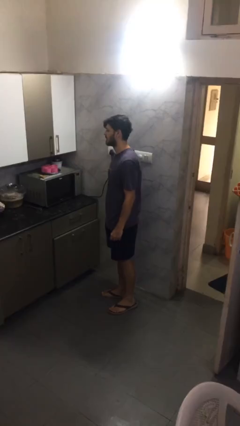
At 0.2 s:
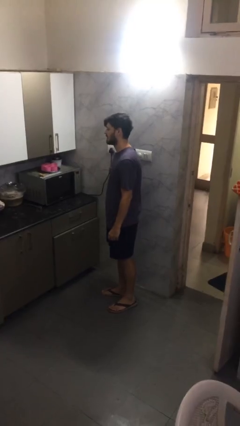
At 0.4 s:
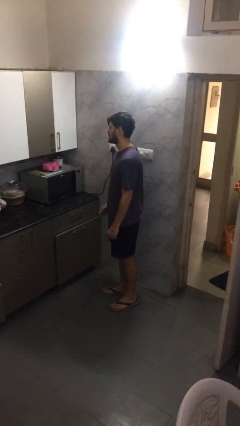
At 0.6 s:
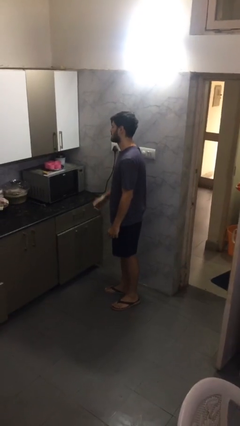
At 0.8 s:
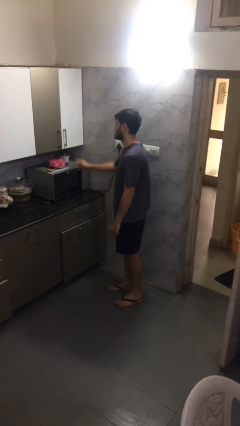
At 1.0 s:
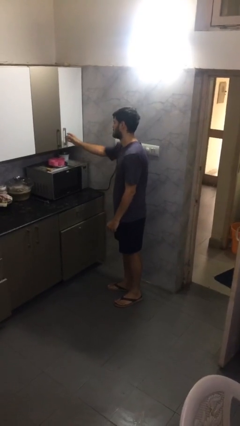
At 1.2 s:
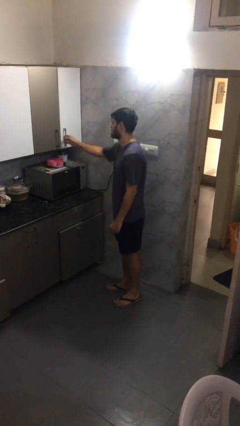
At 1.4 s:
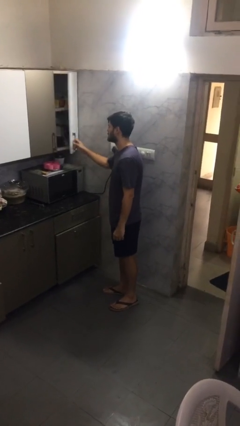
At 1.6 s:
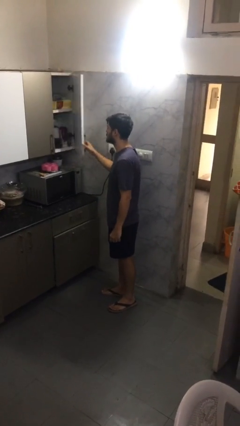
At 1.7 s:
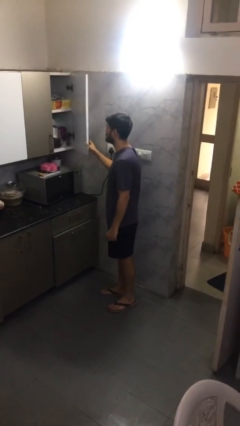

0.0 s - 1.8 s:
person opens cabinet

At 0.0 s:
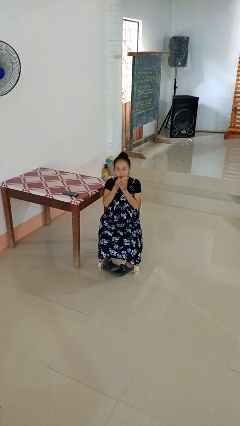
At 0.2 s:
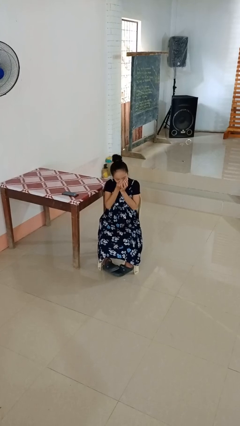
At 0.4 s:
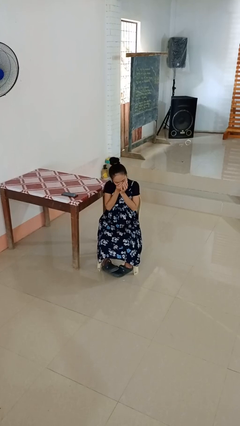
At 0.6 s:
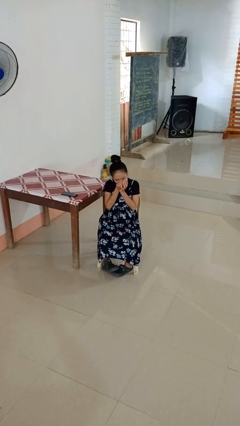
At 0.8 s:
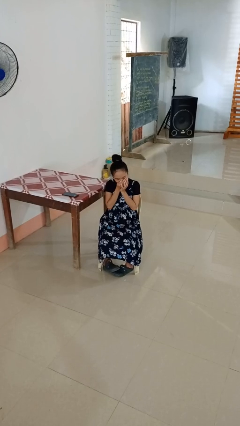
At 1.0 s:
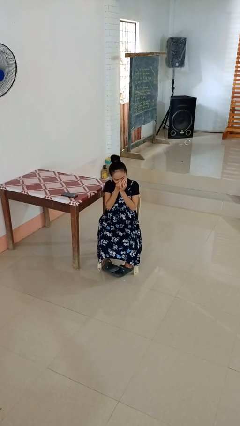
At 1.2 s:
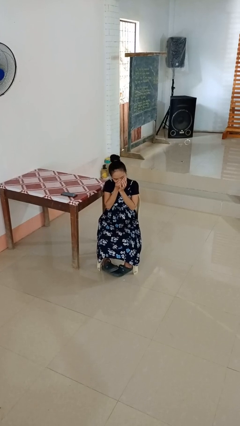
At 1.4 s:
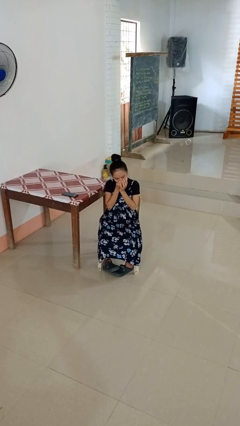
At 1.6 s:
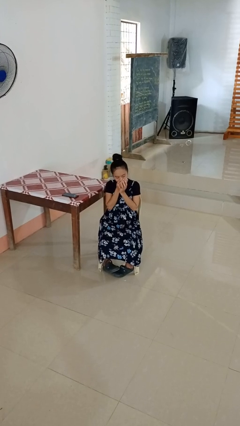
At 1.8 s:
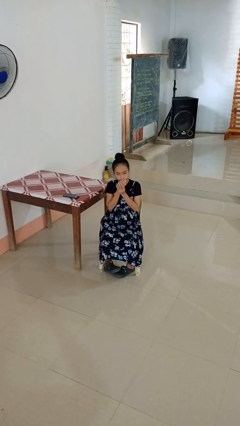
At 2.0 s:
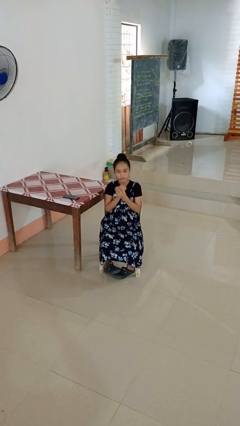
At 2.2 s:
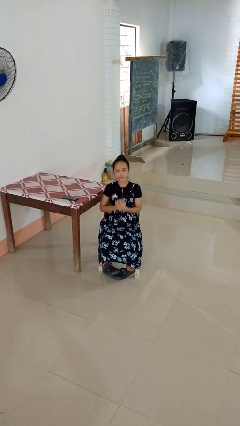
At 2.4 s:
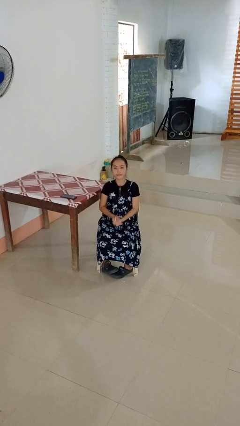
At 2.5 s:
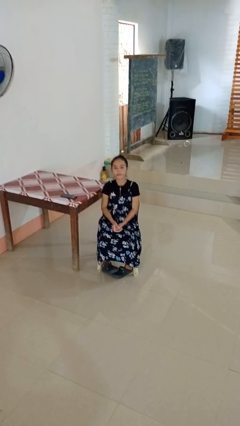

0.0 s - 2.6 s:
person sneezes into hand

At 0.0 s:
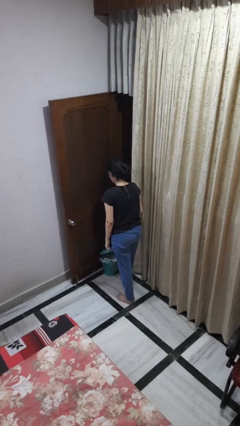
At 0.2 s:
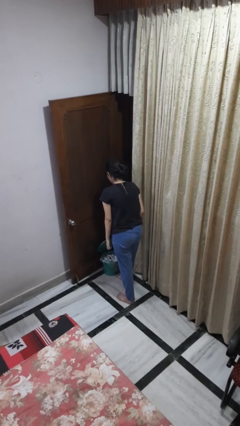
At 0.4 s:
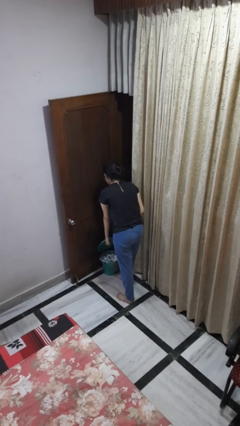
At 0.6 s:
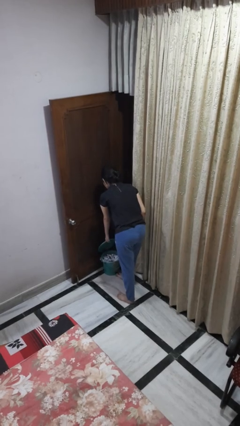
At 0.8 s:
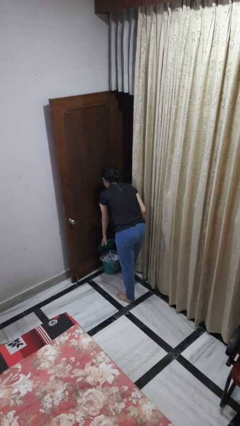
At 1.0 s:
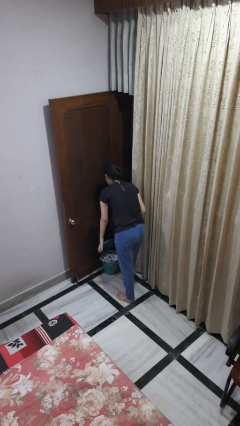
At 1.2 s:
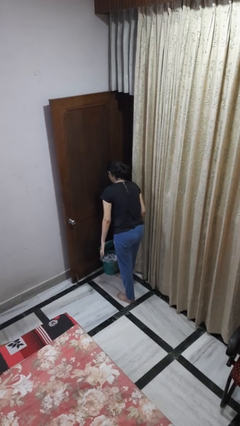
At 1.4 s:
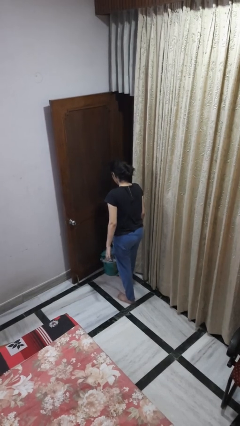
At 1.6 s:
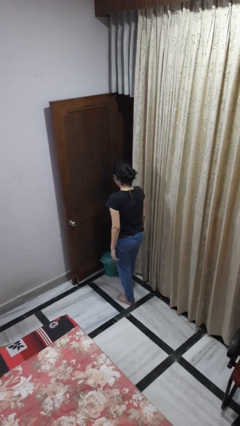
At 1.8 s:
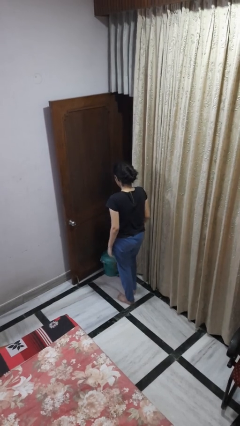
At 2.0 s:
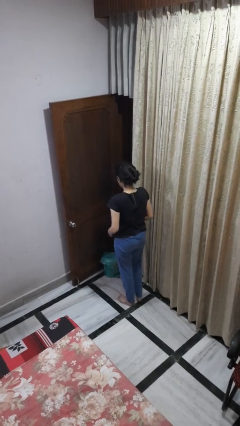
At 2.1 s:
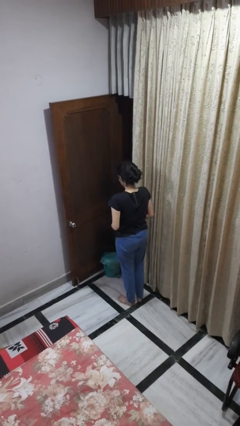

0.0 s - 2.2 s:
person discards trash

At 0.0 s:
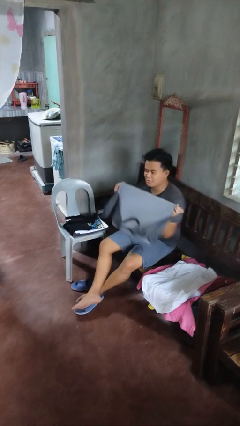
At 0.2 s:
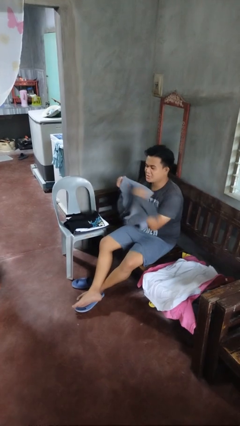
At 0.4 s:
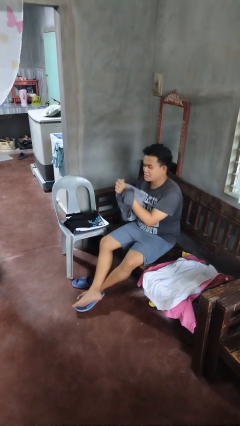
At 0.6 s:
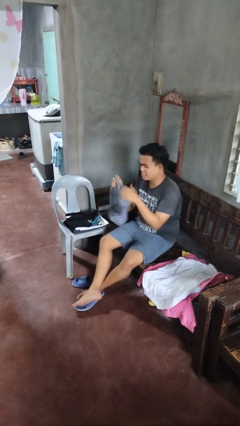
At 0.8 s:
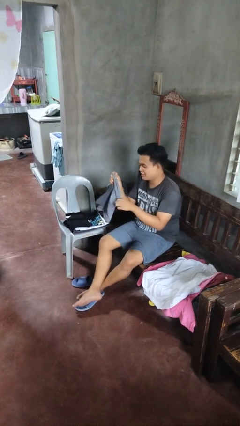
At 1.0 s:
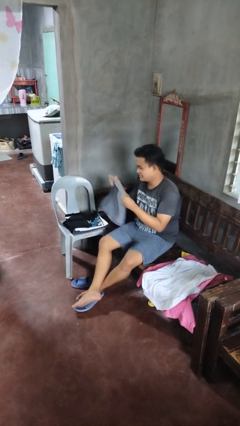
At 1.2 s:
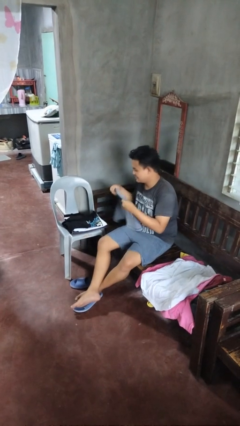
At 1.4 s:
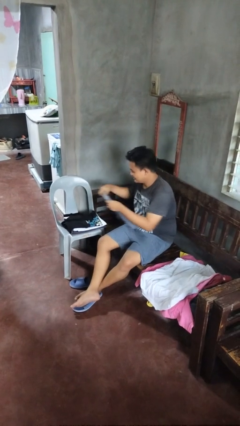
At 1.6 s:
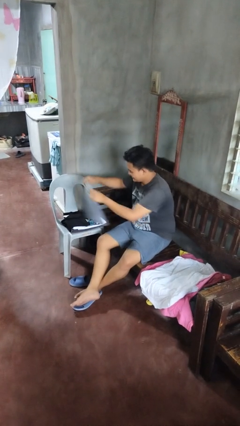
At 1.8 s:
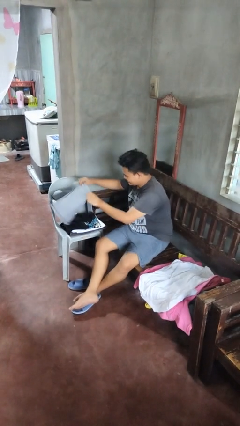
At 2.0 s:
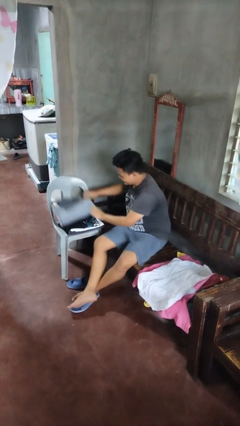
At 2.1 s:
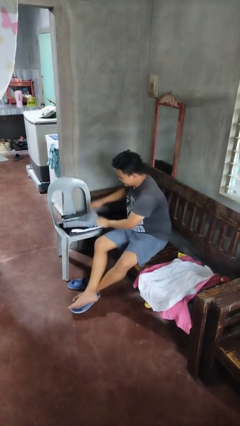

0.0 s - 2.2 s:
person folds shirt

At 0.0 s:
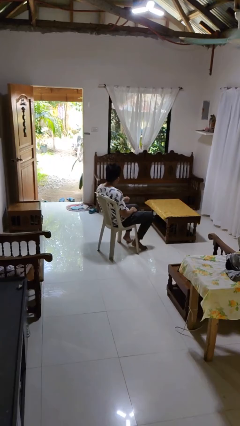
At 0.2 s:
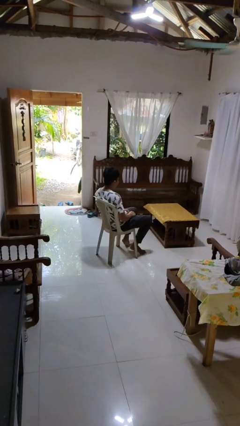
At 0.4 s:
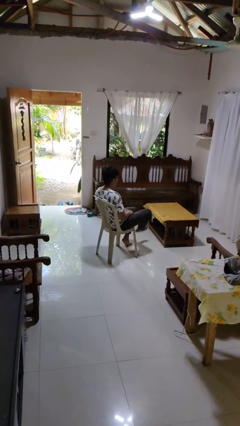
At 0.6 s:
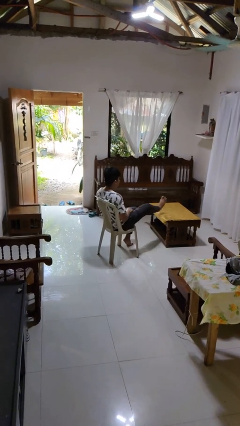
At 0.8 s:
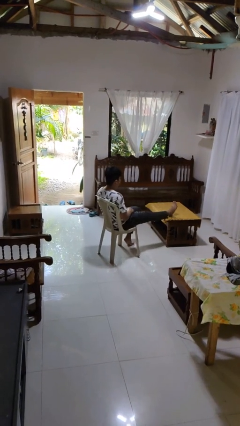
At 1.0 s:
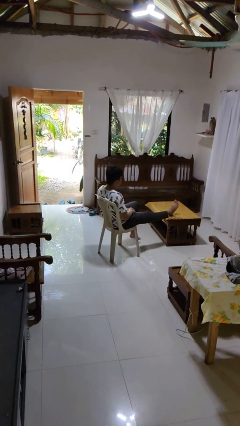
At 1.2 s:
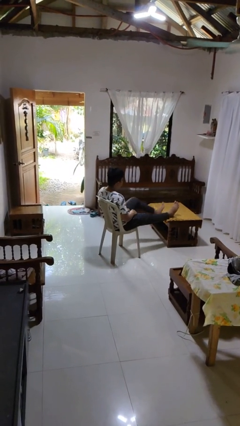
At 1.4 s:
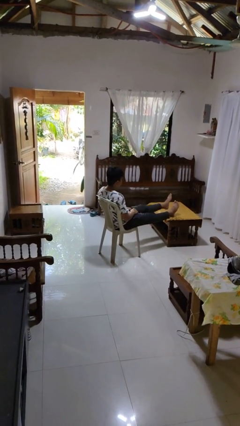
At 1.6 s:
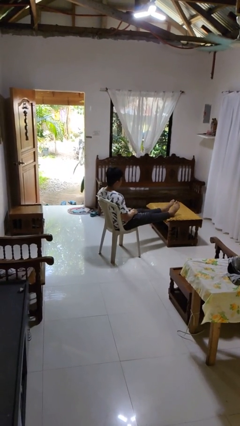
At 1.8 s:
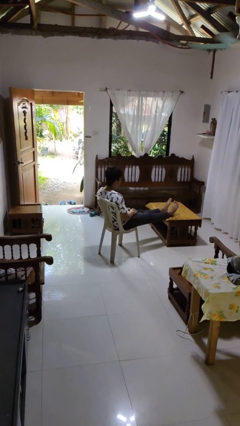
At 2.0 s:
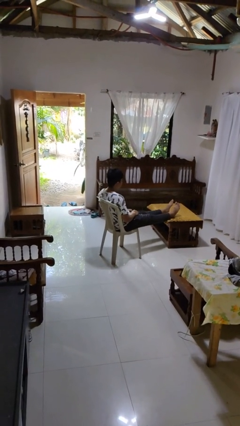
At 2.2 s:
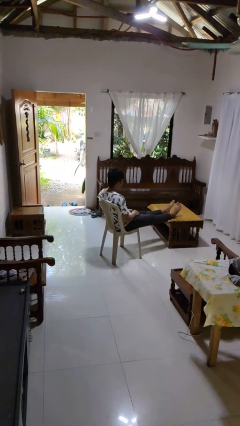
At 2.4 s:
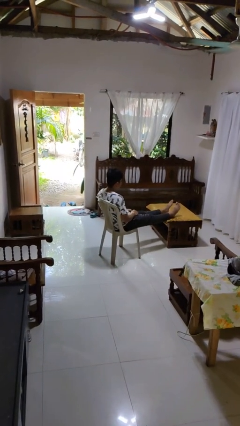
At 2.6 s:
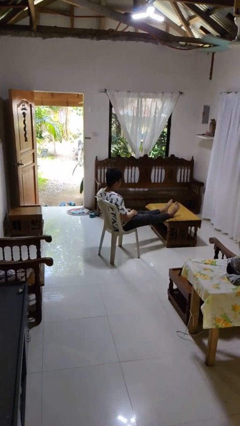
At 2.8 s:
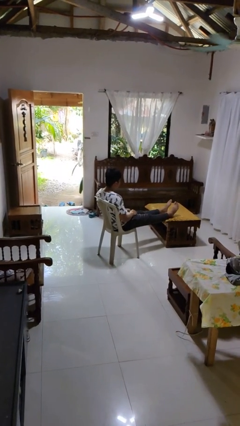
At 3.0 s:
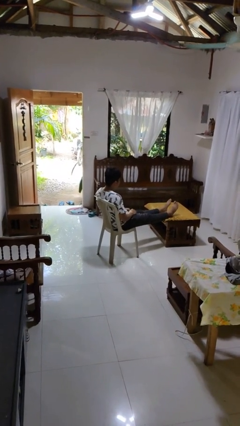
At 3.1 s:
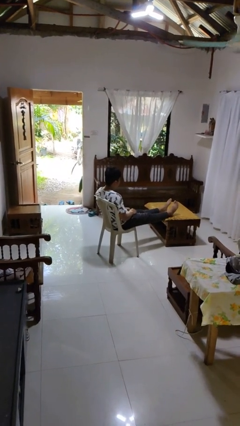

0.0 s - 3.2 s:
person puts feet up

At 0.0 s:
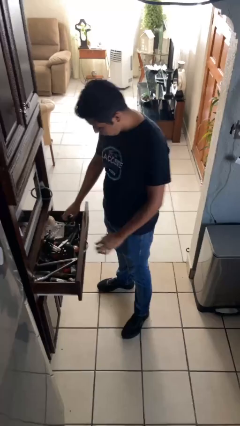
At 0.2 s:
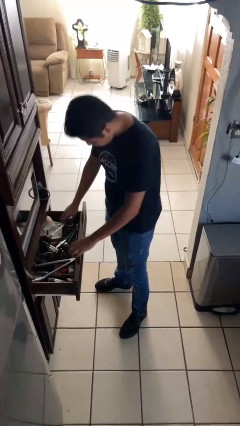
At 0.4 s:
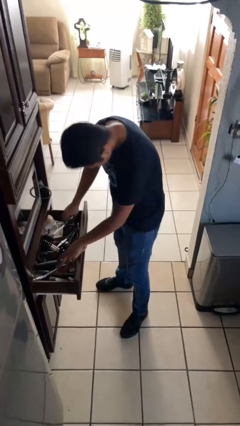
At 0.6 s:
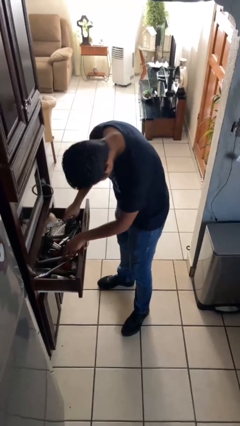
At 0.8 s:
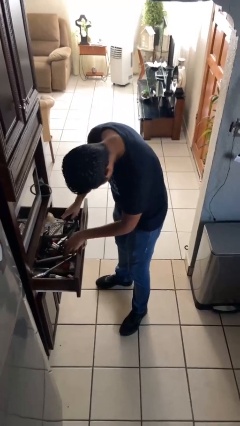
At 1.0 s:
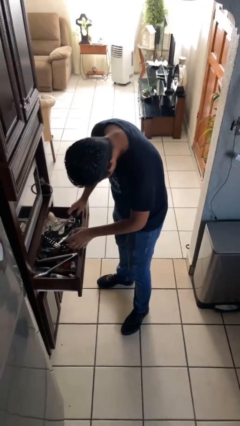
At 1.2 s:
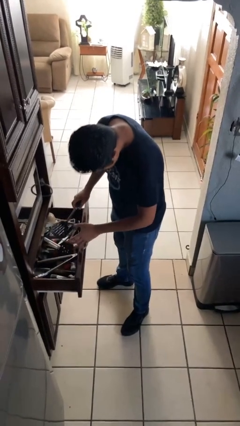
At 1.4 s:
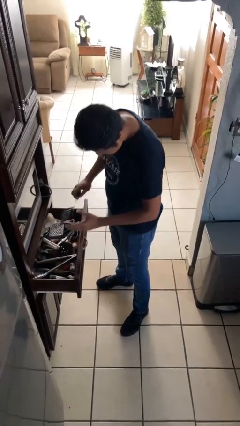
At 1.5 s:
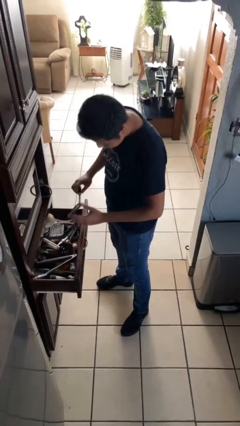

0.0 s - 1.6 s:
person takes object from kitchen drawer

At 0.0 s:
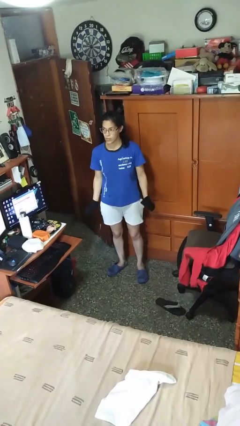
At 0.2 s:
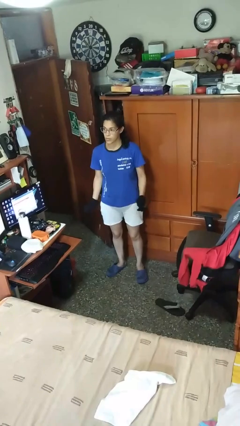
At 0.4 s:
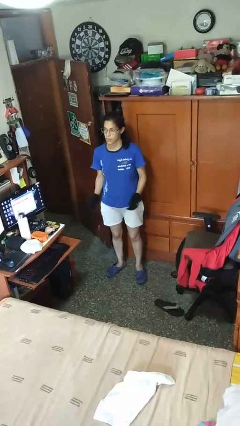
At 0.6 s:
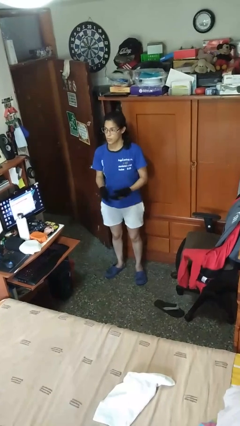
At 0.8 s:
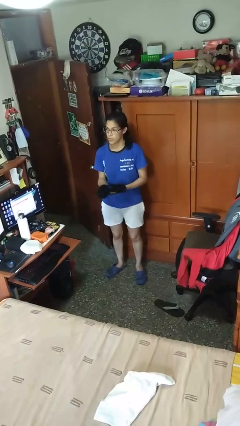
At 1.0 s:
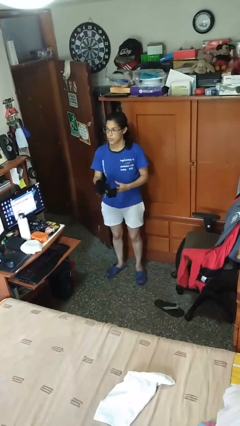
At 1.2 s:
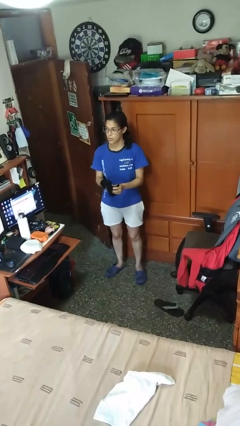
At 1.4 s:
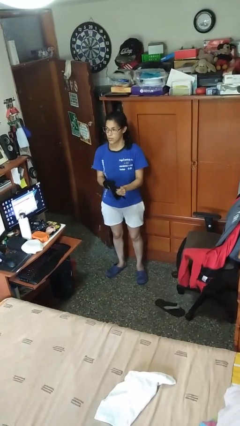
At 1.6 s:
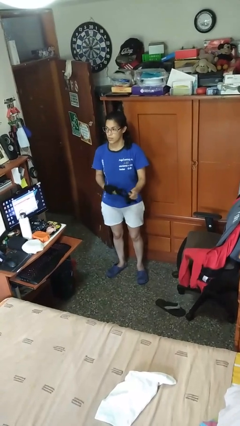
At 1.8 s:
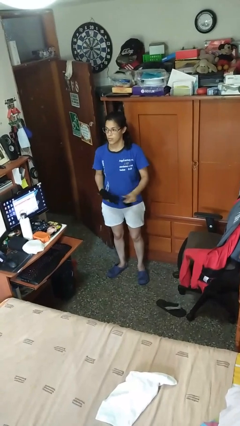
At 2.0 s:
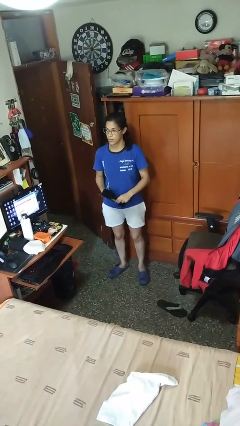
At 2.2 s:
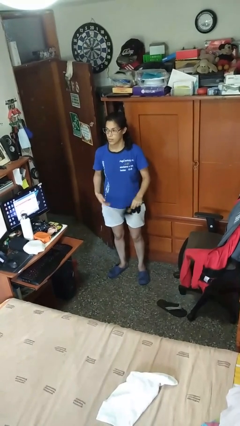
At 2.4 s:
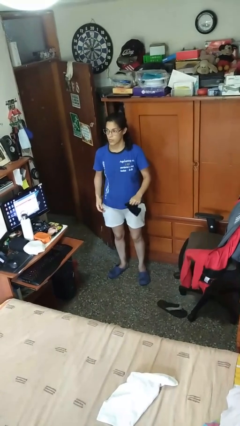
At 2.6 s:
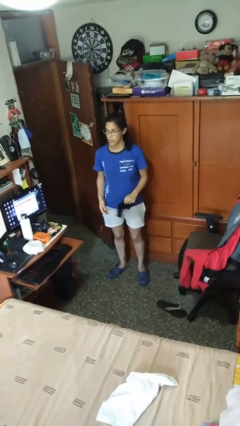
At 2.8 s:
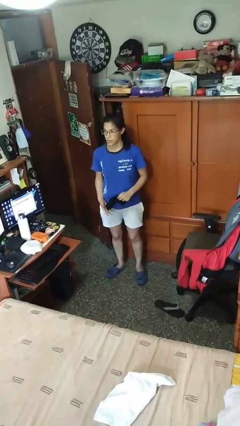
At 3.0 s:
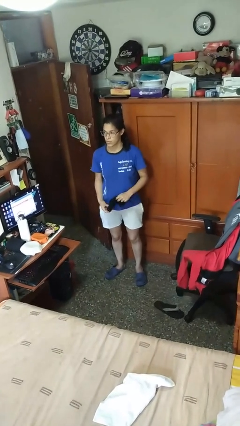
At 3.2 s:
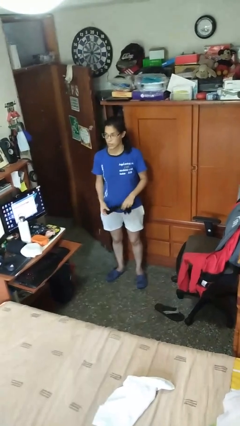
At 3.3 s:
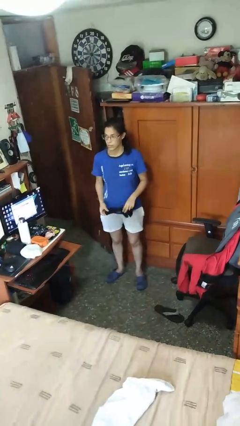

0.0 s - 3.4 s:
person takes off gloves
